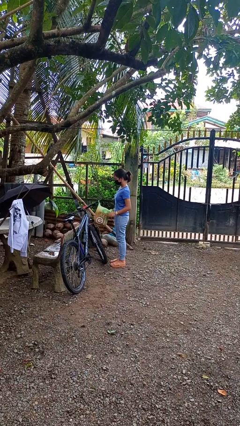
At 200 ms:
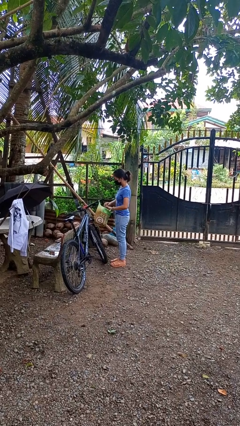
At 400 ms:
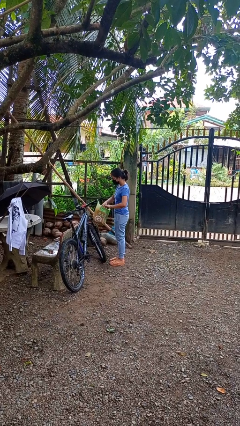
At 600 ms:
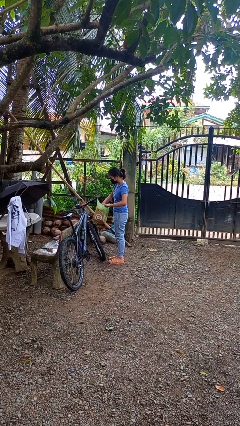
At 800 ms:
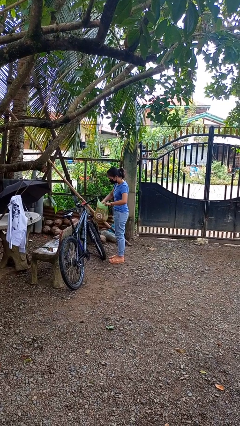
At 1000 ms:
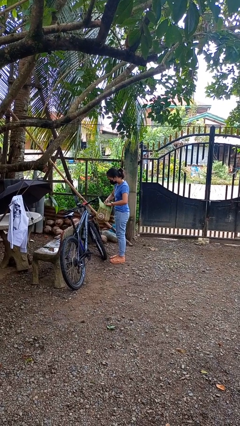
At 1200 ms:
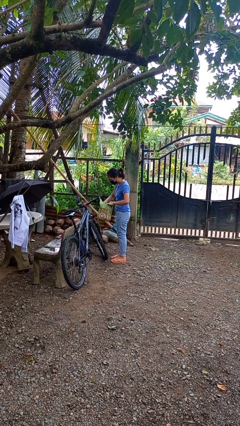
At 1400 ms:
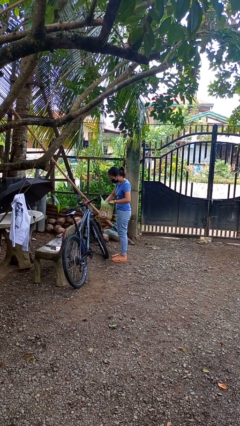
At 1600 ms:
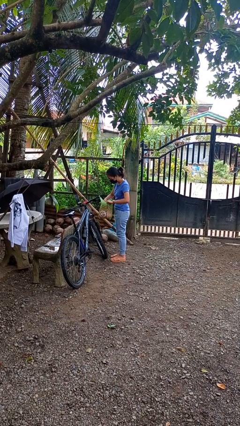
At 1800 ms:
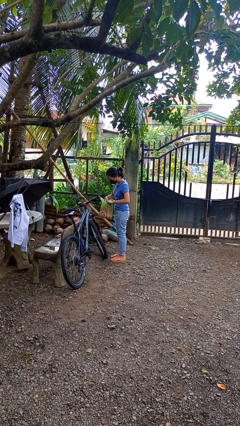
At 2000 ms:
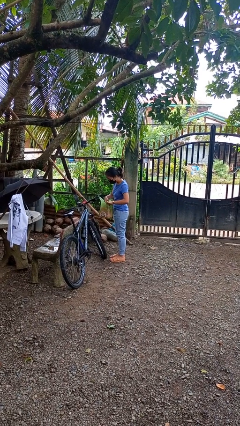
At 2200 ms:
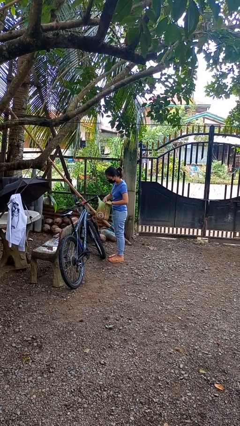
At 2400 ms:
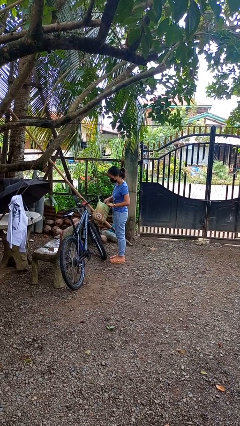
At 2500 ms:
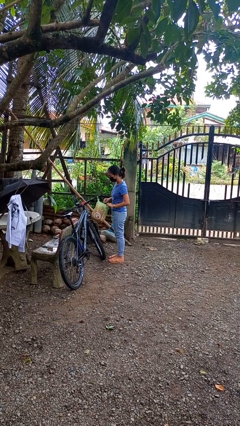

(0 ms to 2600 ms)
person searches in bag

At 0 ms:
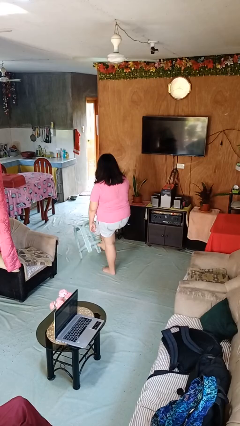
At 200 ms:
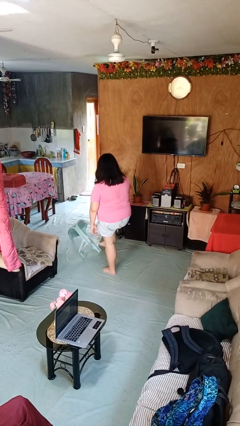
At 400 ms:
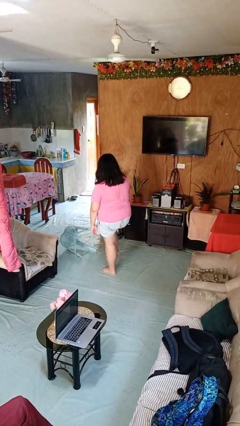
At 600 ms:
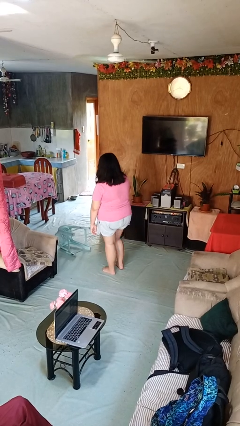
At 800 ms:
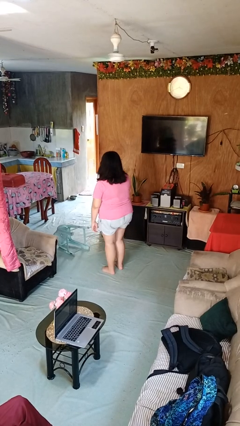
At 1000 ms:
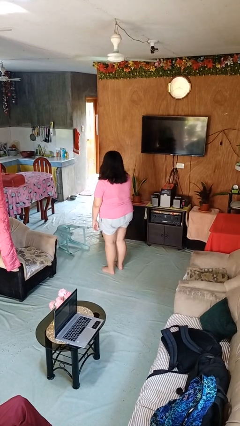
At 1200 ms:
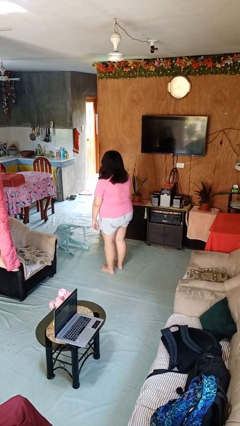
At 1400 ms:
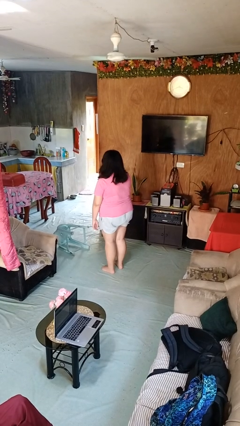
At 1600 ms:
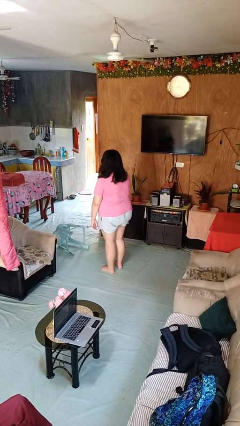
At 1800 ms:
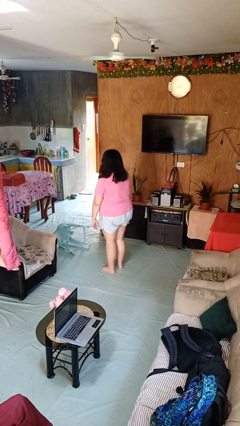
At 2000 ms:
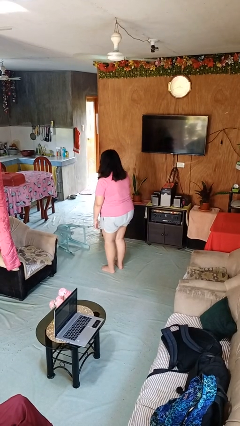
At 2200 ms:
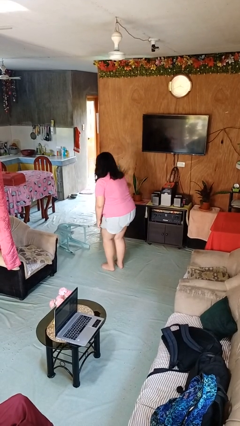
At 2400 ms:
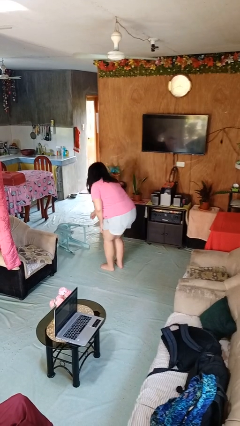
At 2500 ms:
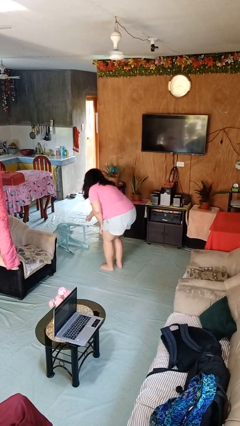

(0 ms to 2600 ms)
person knocks over furniture

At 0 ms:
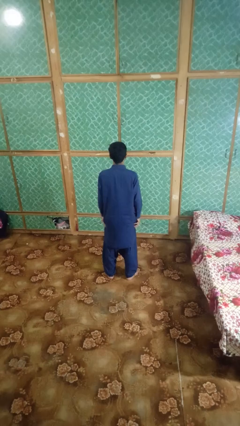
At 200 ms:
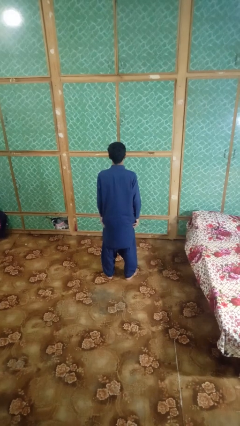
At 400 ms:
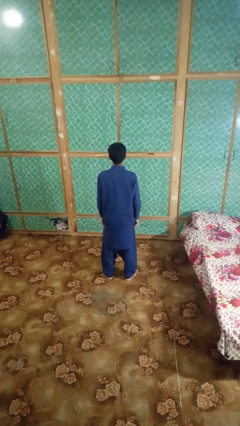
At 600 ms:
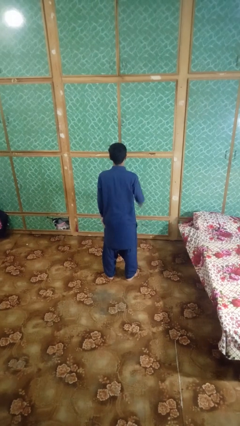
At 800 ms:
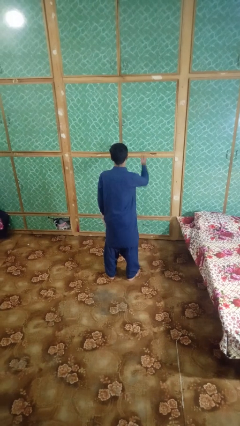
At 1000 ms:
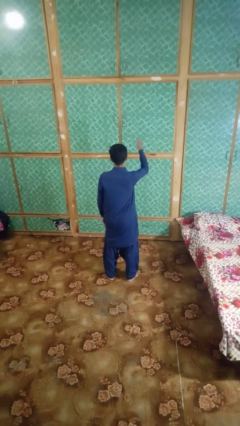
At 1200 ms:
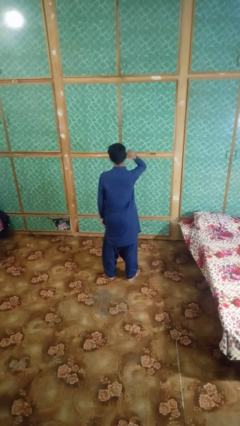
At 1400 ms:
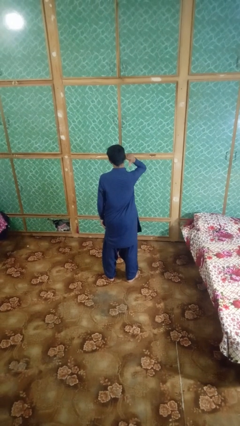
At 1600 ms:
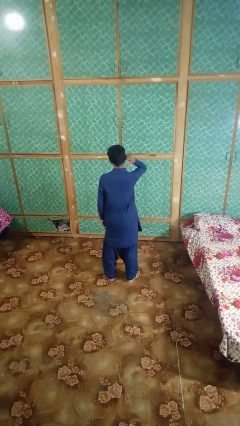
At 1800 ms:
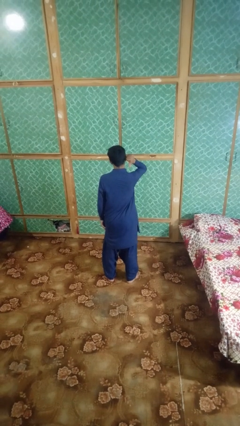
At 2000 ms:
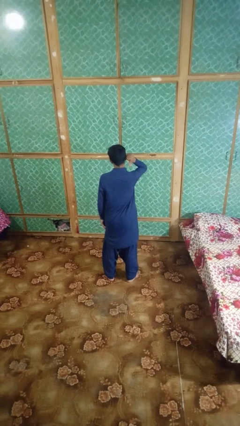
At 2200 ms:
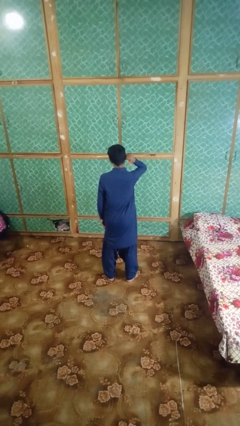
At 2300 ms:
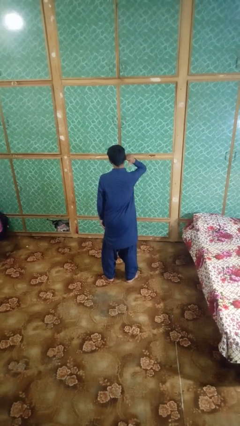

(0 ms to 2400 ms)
person gestures behind me

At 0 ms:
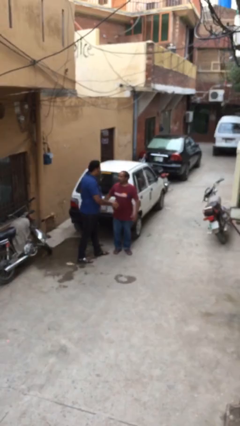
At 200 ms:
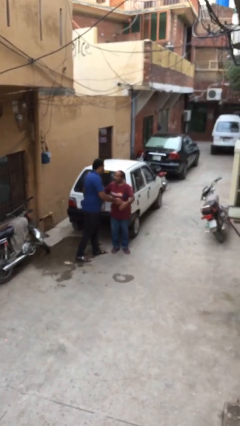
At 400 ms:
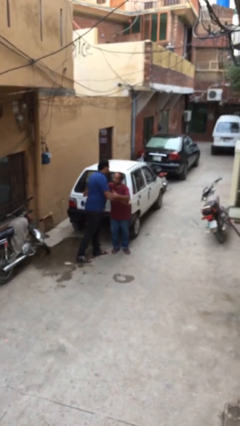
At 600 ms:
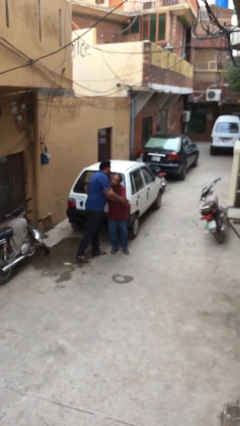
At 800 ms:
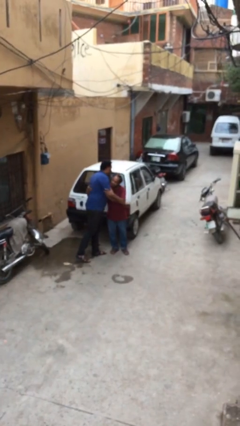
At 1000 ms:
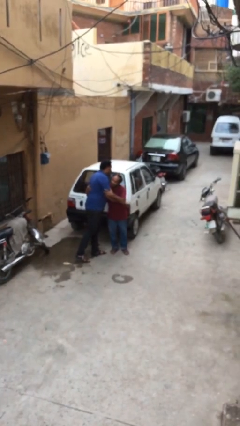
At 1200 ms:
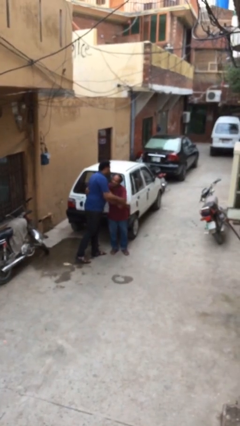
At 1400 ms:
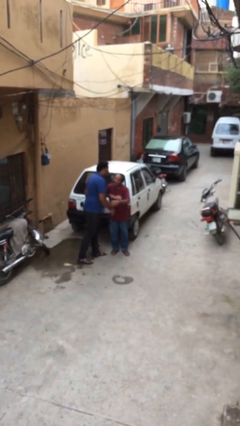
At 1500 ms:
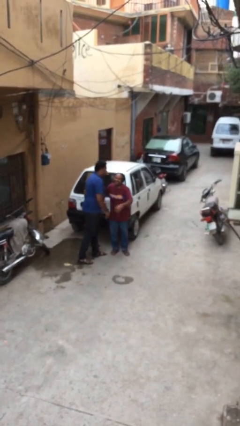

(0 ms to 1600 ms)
person embraces person

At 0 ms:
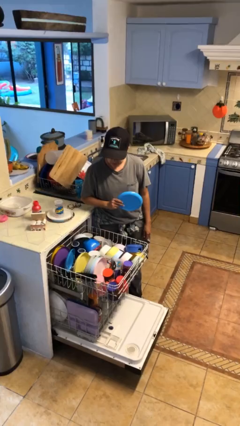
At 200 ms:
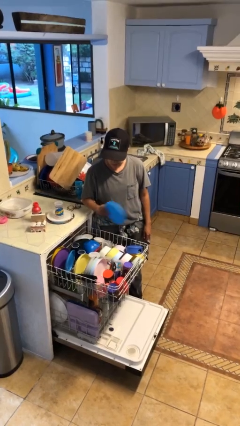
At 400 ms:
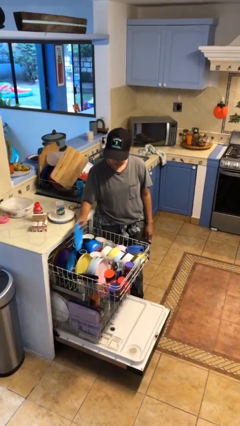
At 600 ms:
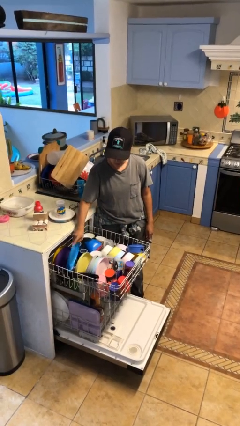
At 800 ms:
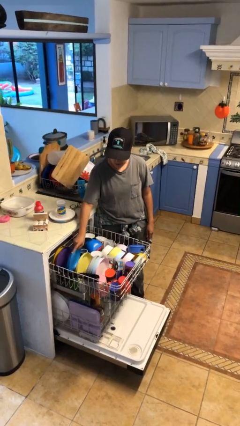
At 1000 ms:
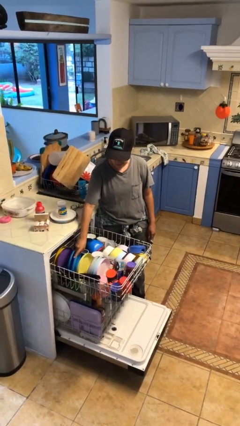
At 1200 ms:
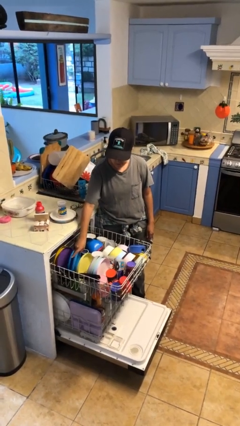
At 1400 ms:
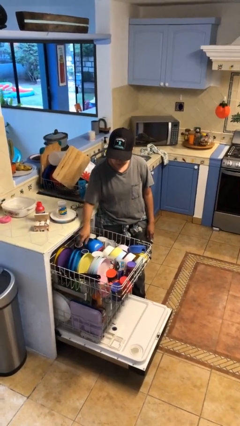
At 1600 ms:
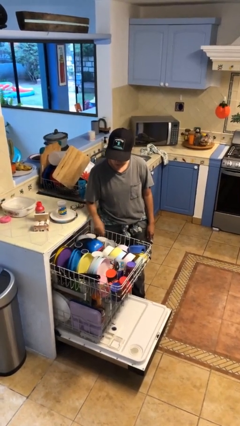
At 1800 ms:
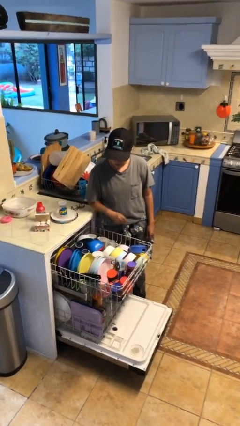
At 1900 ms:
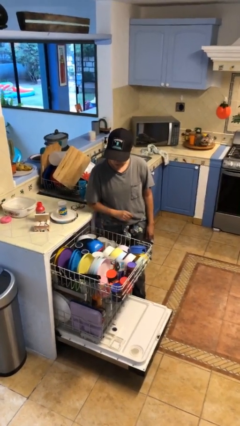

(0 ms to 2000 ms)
person loads dishwasher

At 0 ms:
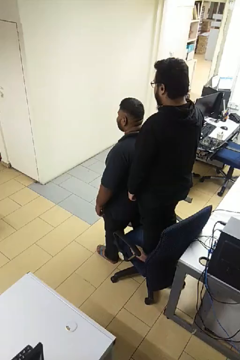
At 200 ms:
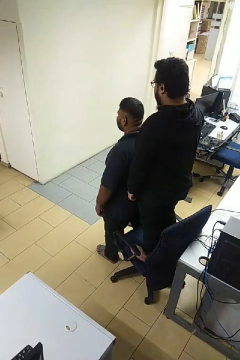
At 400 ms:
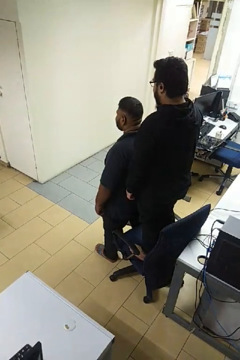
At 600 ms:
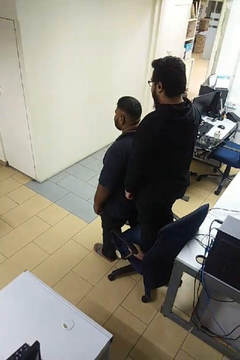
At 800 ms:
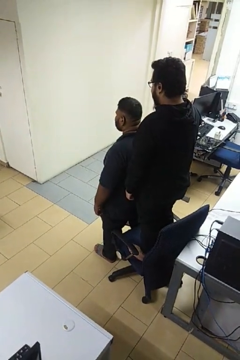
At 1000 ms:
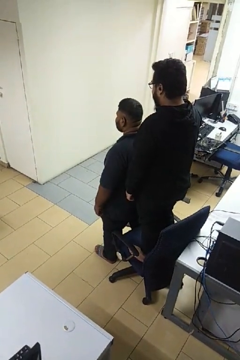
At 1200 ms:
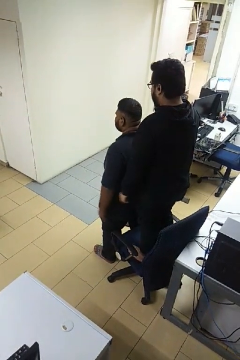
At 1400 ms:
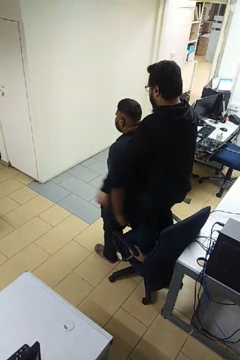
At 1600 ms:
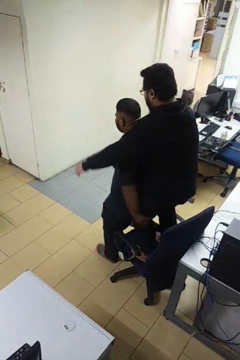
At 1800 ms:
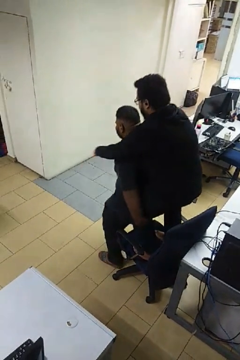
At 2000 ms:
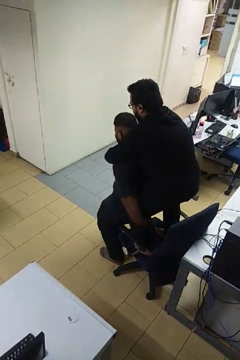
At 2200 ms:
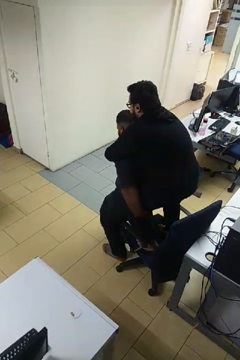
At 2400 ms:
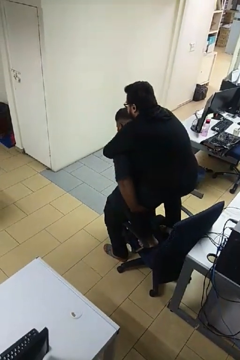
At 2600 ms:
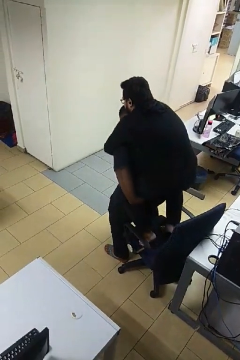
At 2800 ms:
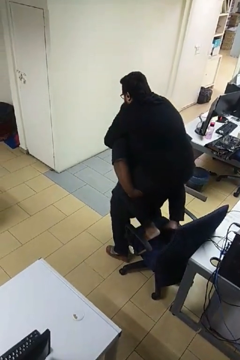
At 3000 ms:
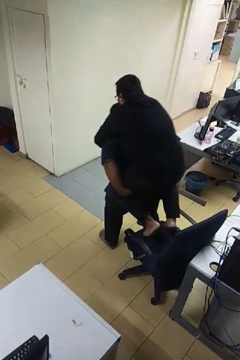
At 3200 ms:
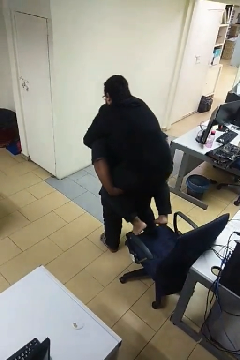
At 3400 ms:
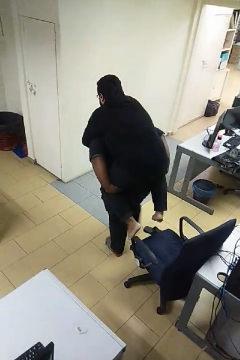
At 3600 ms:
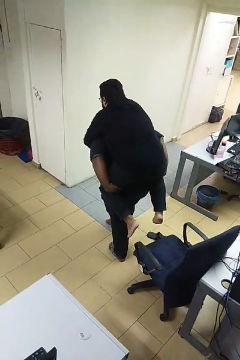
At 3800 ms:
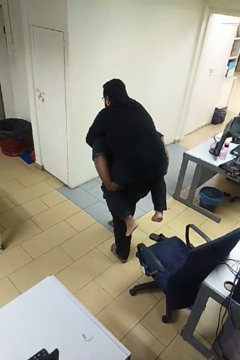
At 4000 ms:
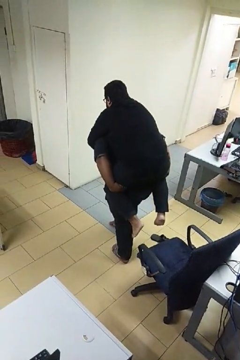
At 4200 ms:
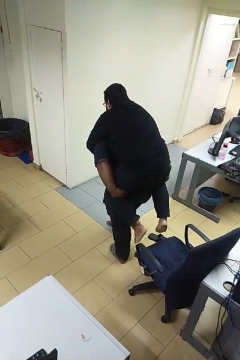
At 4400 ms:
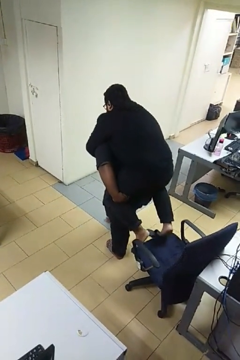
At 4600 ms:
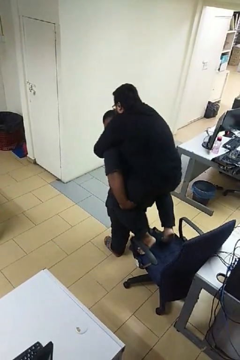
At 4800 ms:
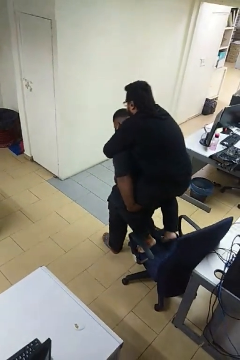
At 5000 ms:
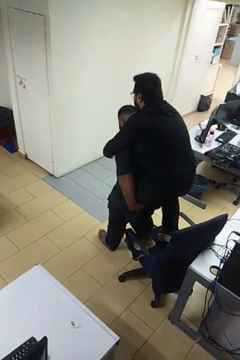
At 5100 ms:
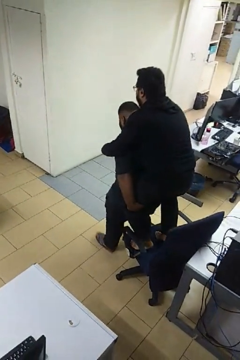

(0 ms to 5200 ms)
person carries person on back

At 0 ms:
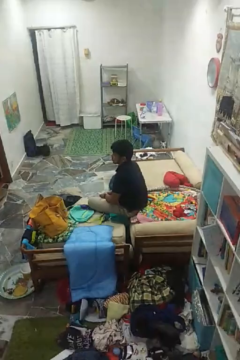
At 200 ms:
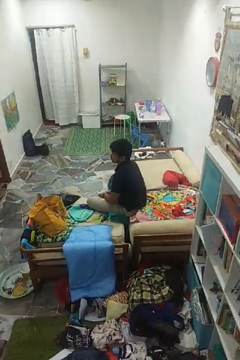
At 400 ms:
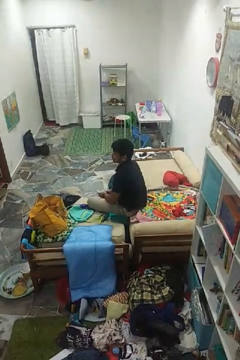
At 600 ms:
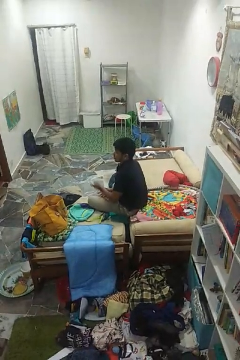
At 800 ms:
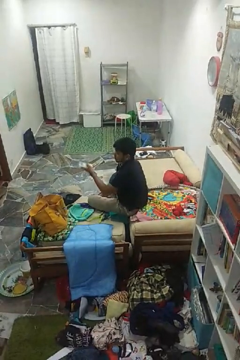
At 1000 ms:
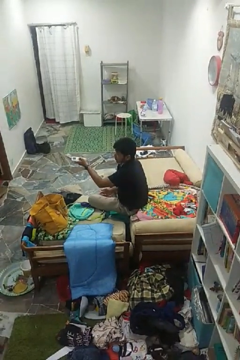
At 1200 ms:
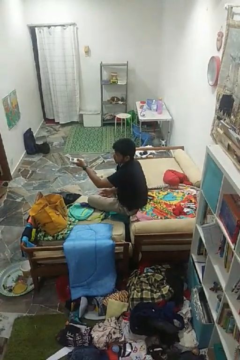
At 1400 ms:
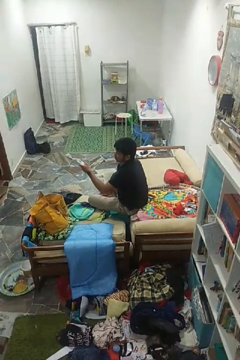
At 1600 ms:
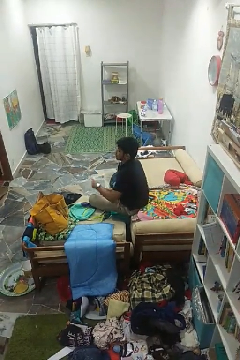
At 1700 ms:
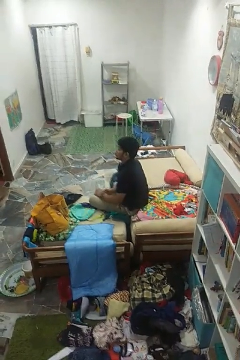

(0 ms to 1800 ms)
person uses television remote

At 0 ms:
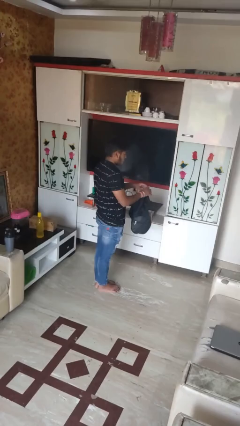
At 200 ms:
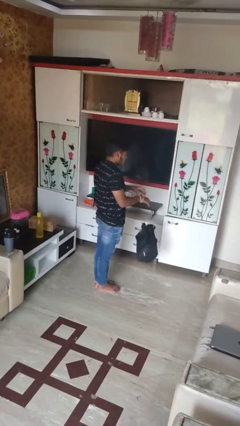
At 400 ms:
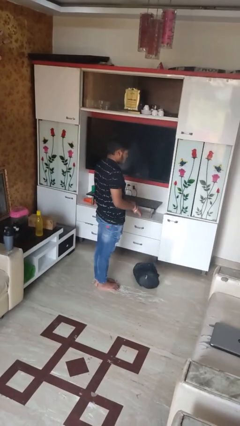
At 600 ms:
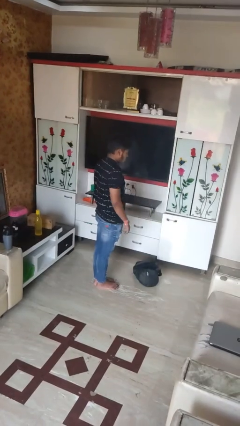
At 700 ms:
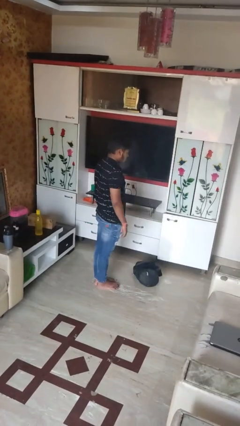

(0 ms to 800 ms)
person drops object
